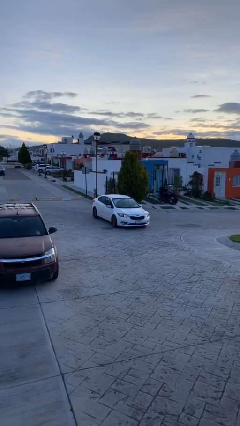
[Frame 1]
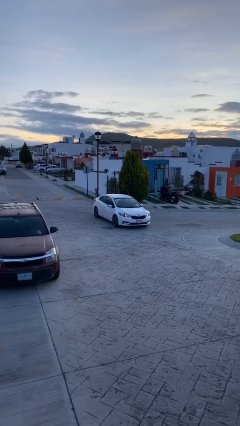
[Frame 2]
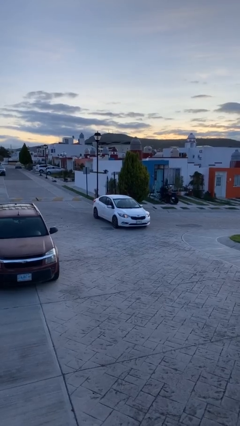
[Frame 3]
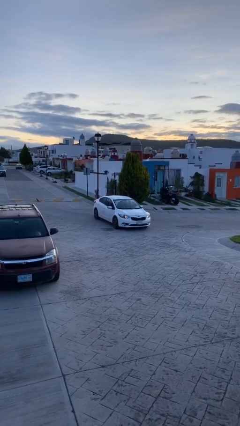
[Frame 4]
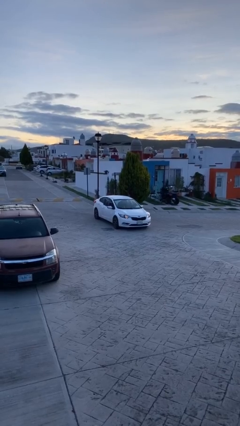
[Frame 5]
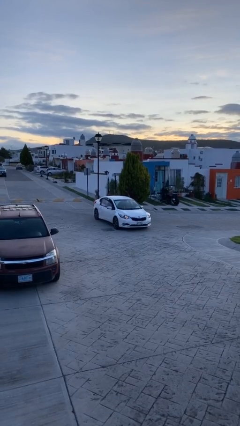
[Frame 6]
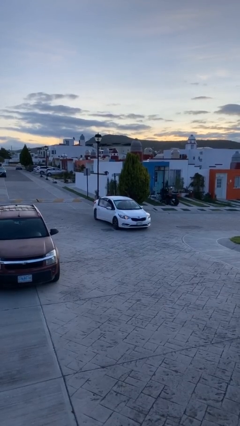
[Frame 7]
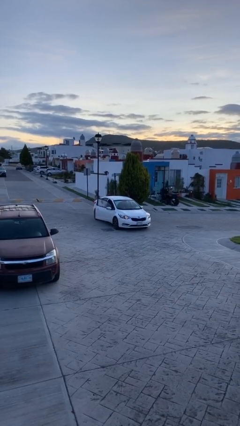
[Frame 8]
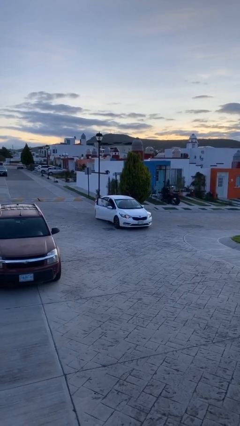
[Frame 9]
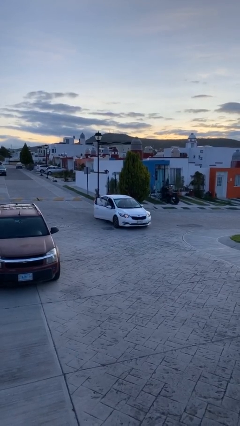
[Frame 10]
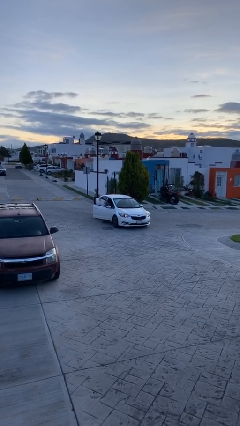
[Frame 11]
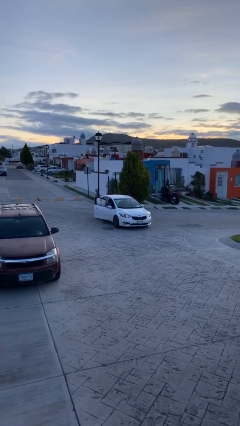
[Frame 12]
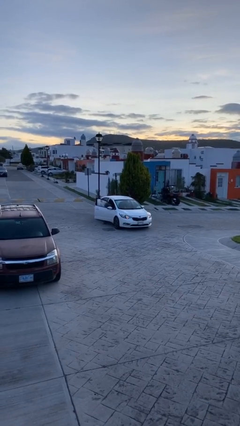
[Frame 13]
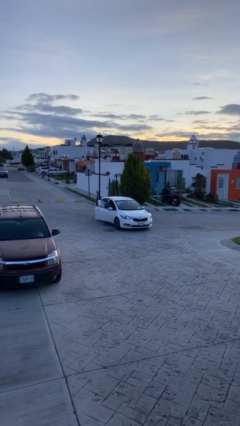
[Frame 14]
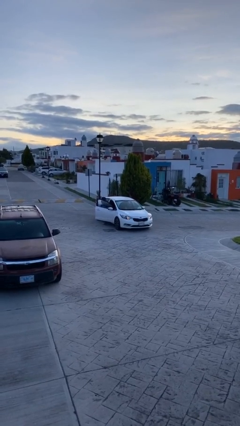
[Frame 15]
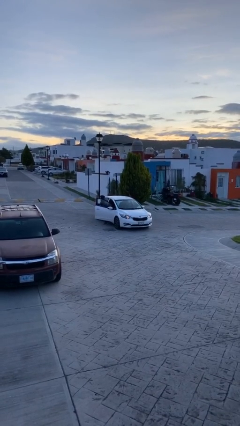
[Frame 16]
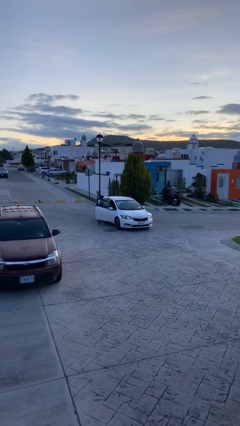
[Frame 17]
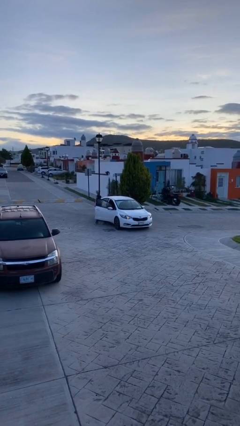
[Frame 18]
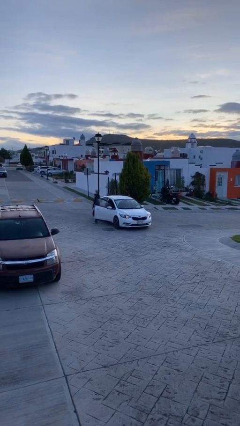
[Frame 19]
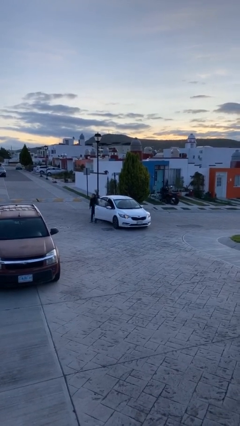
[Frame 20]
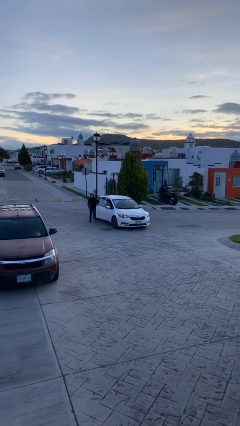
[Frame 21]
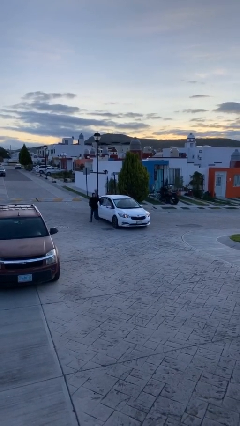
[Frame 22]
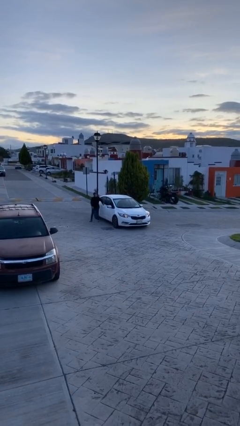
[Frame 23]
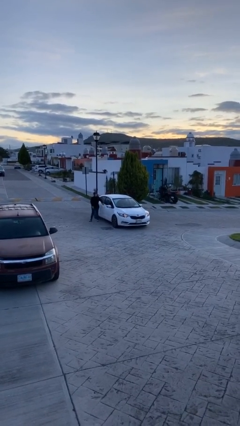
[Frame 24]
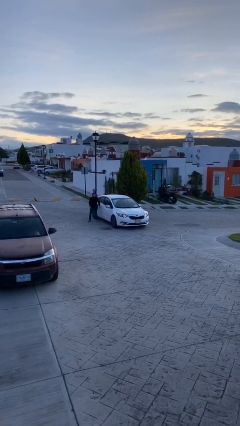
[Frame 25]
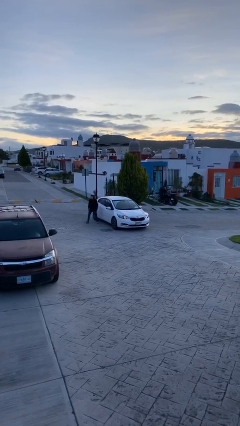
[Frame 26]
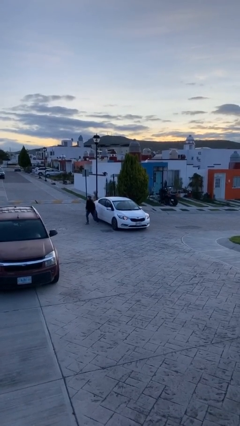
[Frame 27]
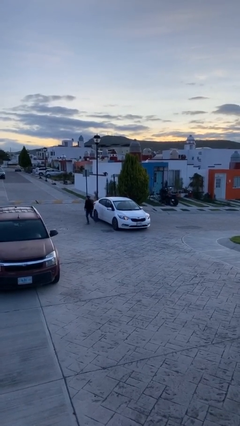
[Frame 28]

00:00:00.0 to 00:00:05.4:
car drops off person

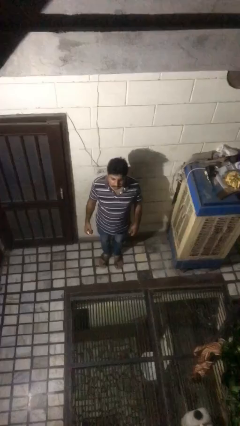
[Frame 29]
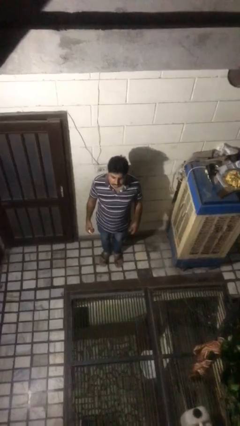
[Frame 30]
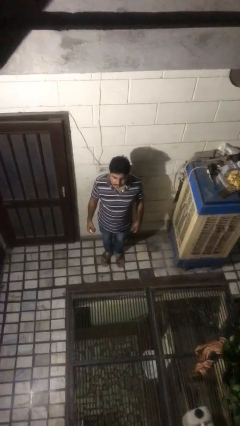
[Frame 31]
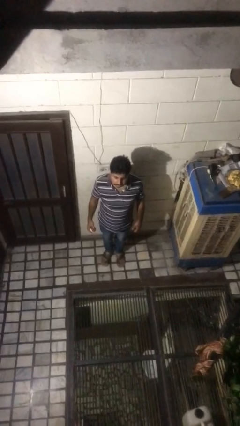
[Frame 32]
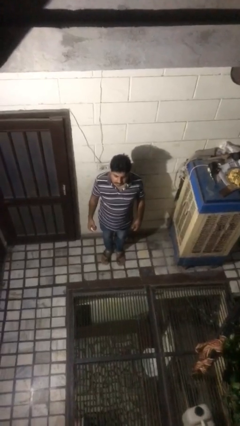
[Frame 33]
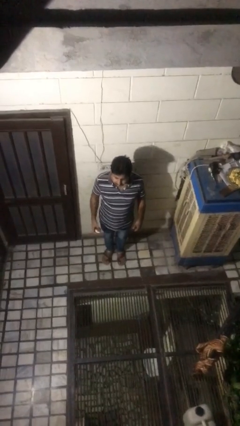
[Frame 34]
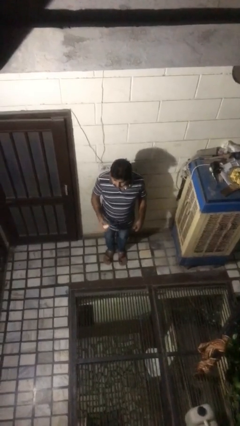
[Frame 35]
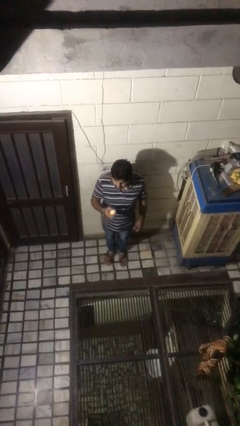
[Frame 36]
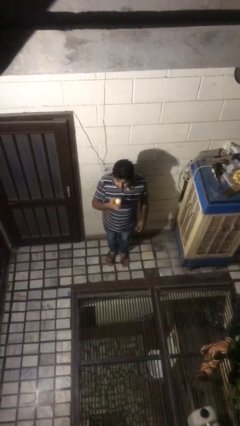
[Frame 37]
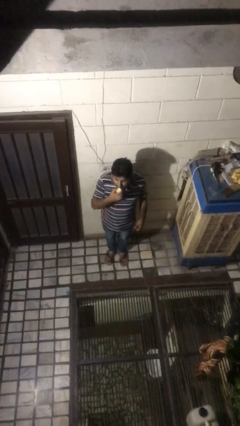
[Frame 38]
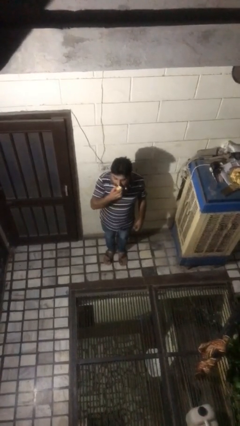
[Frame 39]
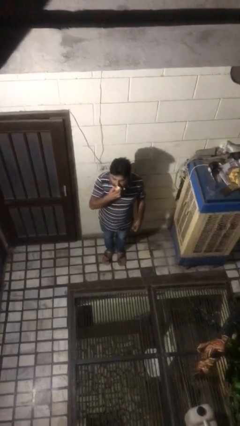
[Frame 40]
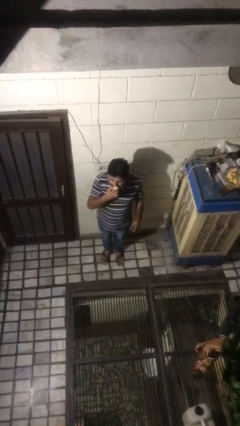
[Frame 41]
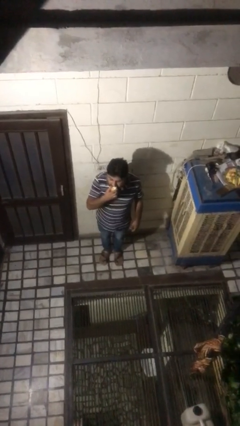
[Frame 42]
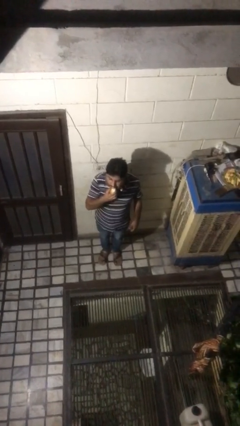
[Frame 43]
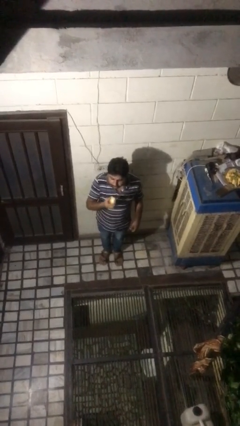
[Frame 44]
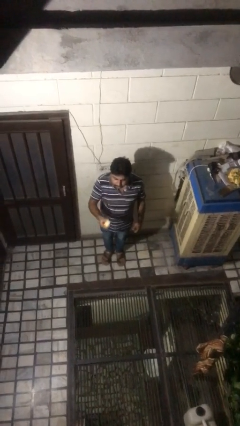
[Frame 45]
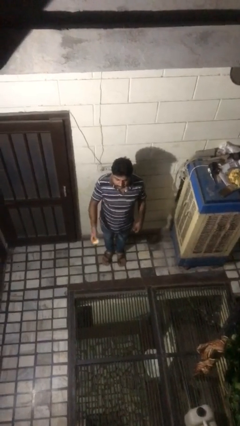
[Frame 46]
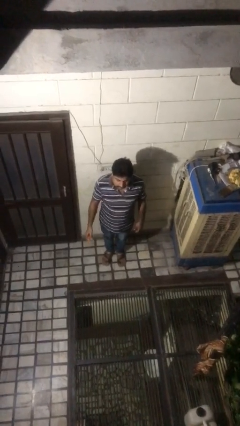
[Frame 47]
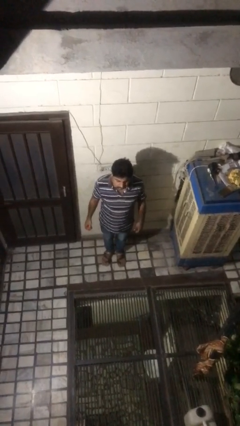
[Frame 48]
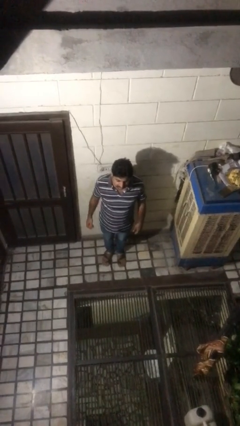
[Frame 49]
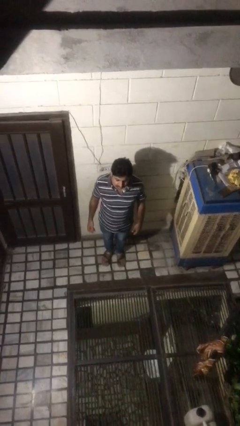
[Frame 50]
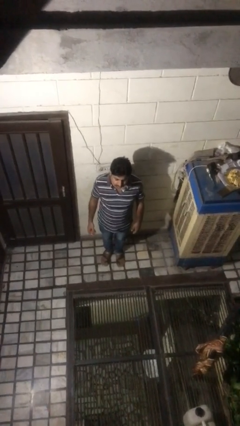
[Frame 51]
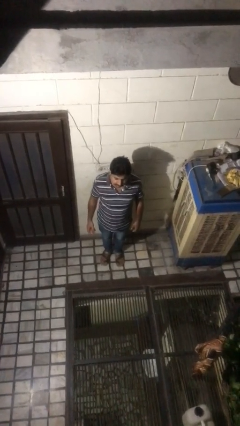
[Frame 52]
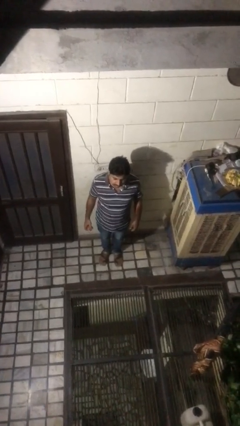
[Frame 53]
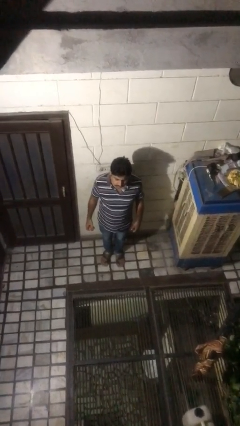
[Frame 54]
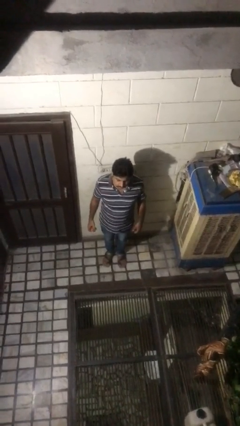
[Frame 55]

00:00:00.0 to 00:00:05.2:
person eats apple

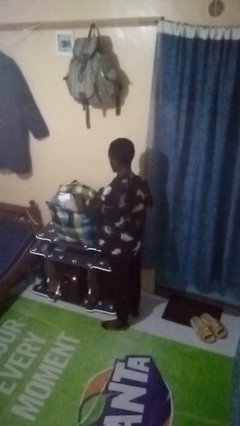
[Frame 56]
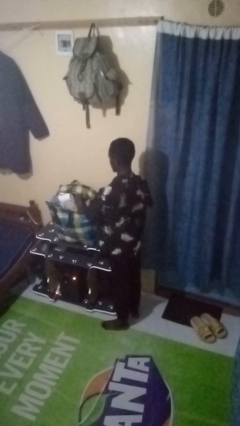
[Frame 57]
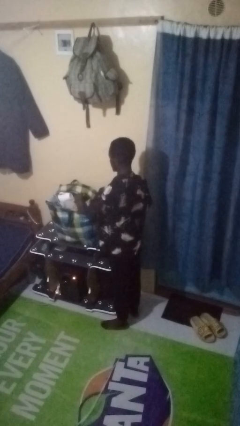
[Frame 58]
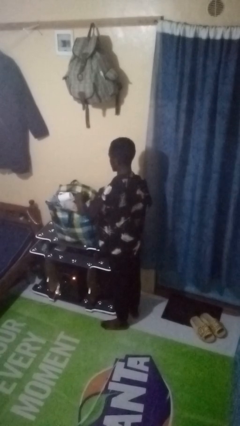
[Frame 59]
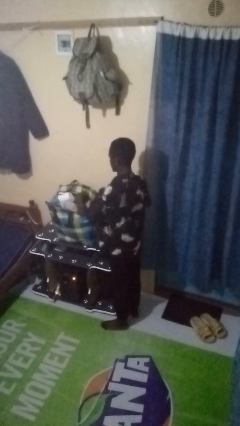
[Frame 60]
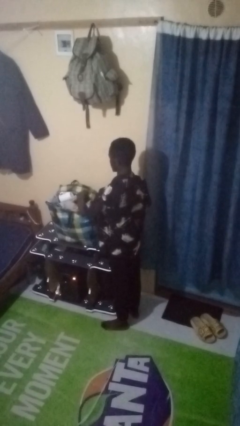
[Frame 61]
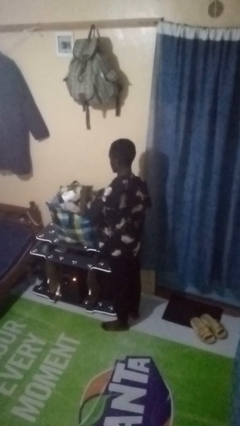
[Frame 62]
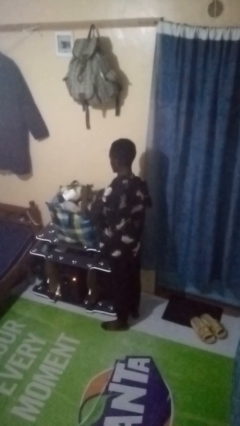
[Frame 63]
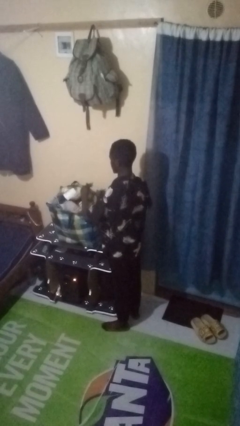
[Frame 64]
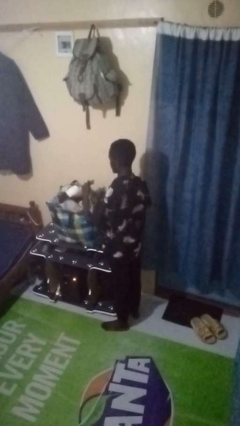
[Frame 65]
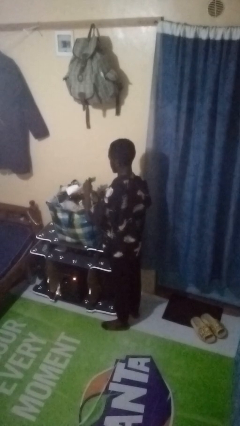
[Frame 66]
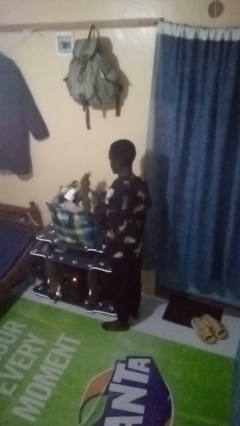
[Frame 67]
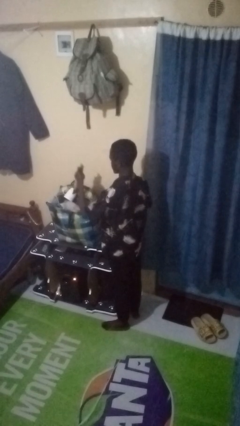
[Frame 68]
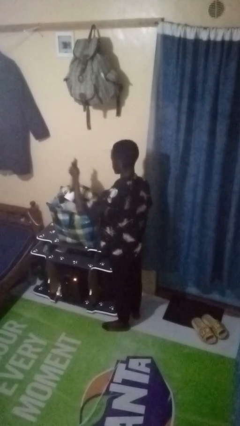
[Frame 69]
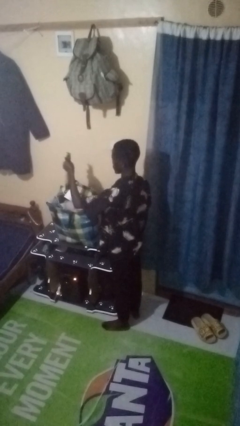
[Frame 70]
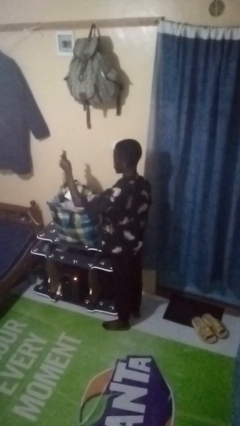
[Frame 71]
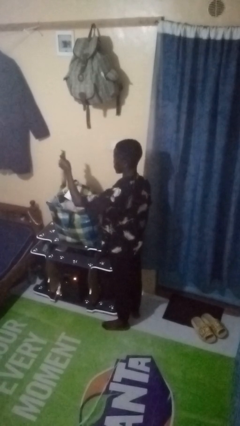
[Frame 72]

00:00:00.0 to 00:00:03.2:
person takes object from bag

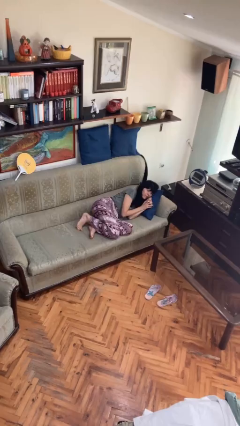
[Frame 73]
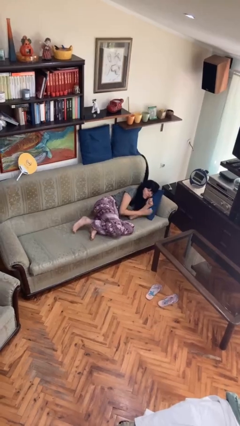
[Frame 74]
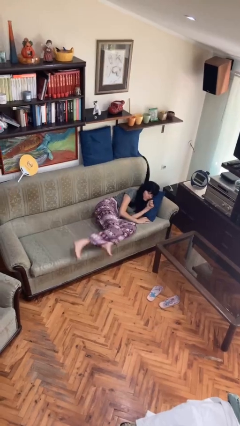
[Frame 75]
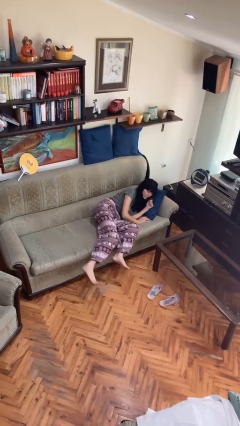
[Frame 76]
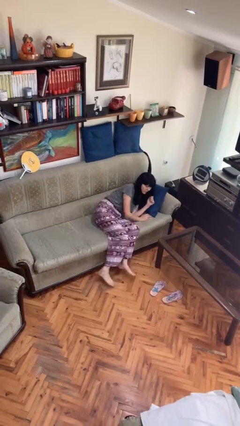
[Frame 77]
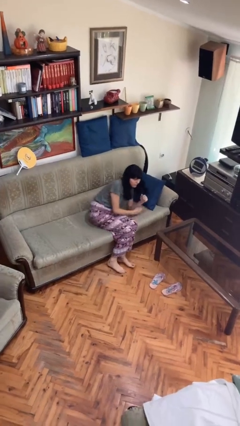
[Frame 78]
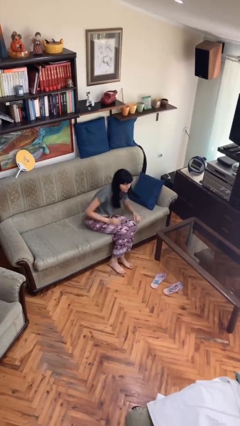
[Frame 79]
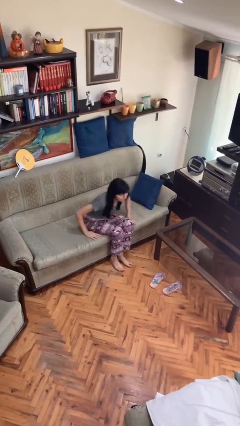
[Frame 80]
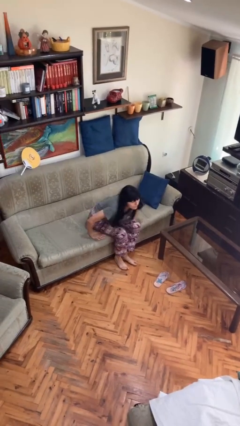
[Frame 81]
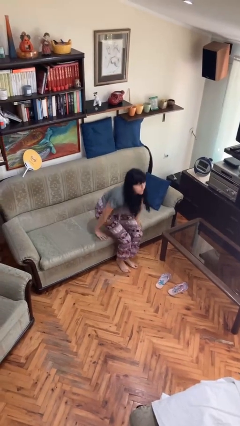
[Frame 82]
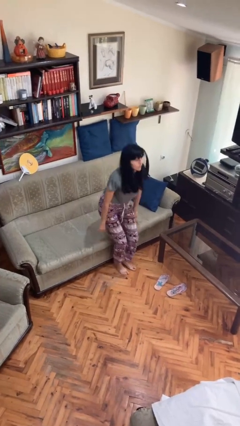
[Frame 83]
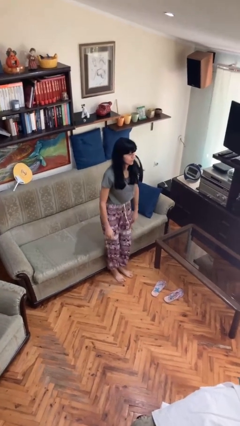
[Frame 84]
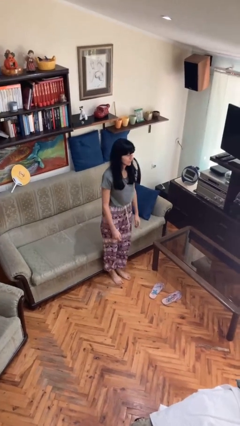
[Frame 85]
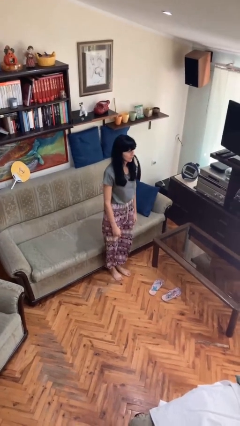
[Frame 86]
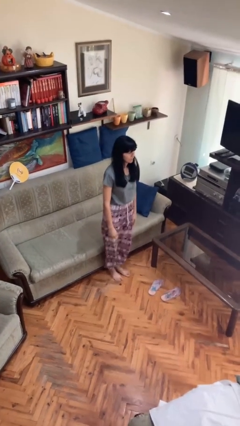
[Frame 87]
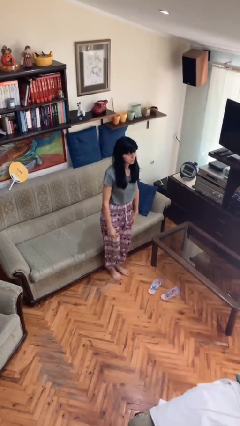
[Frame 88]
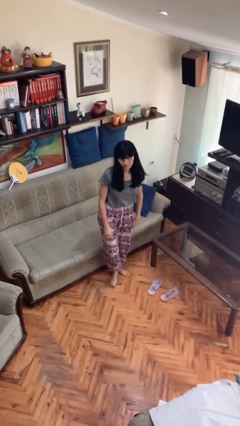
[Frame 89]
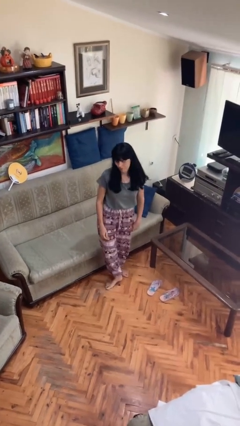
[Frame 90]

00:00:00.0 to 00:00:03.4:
person stands up

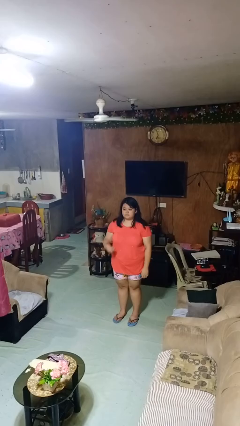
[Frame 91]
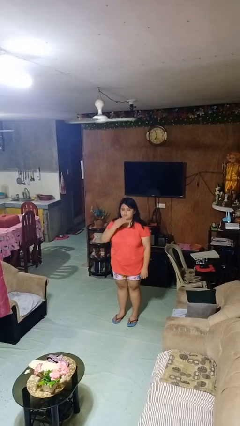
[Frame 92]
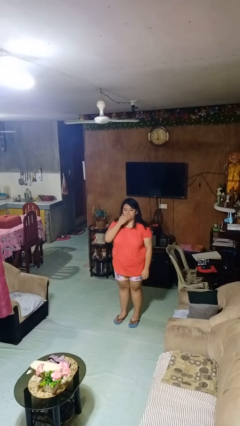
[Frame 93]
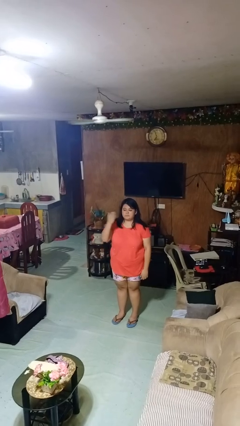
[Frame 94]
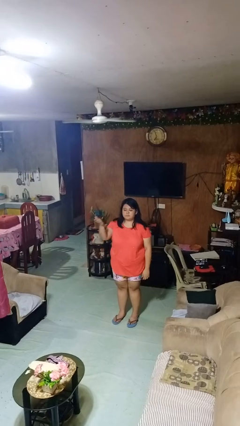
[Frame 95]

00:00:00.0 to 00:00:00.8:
person gestures blow kiss
